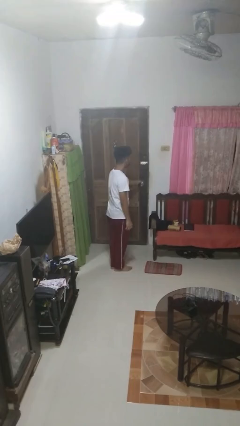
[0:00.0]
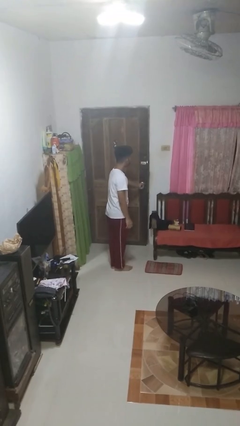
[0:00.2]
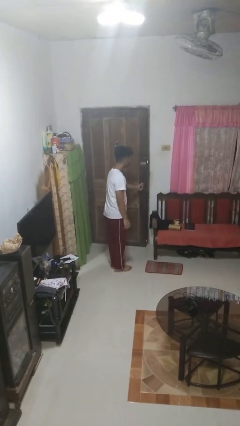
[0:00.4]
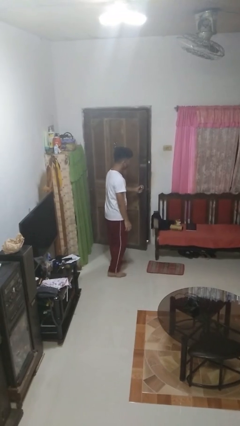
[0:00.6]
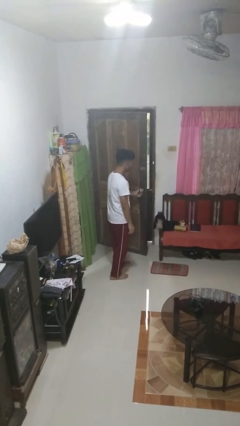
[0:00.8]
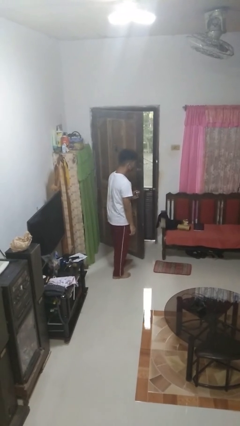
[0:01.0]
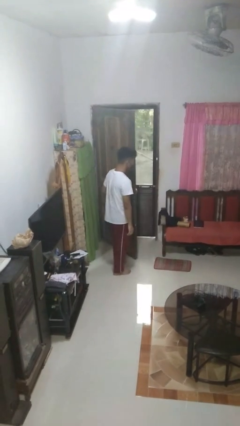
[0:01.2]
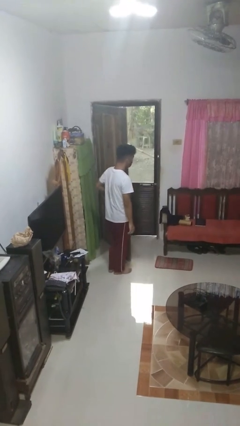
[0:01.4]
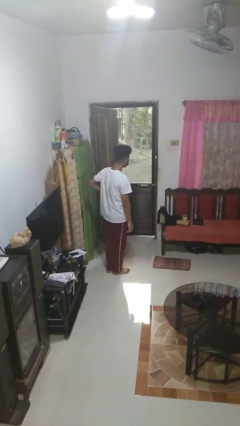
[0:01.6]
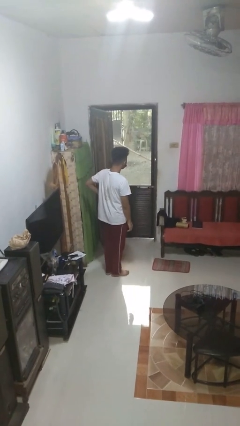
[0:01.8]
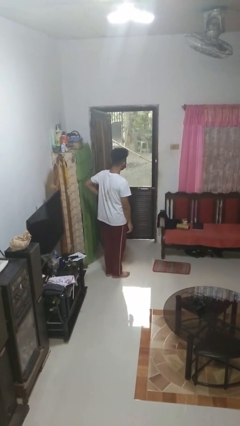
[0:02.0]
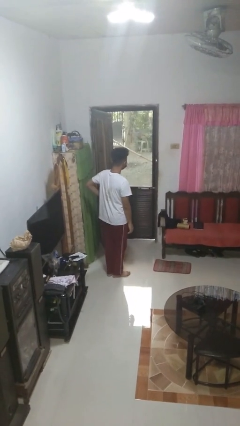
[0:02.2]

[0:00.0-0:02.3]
person opens facility door

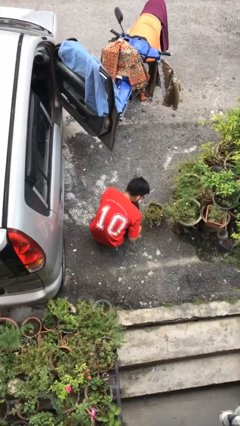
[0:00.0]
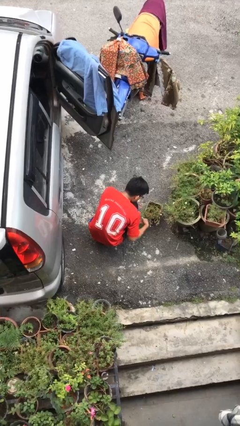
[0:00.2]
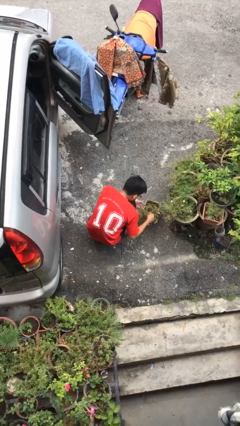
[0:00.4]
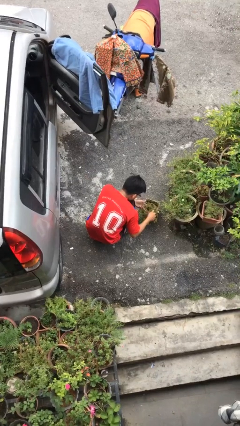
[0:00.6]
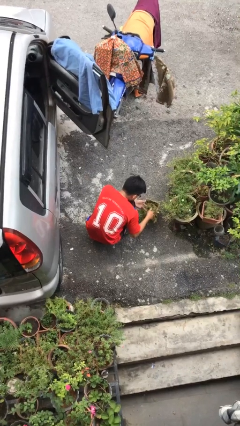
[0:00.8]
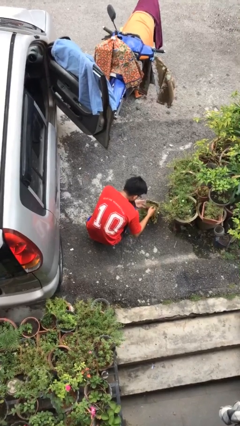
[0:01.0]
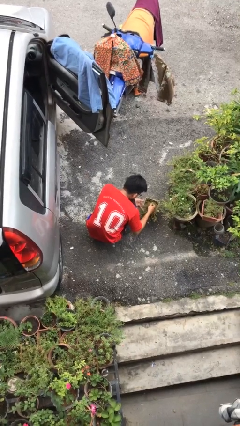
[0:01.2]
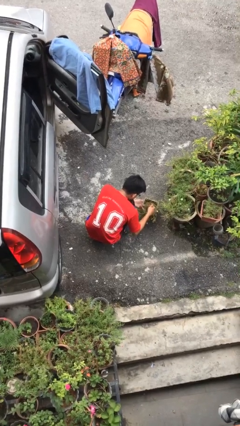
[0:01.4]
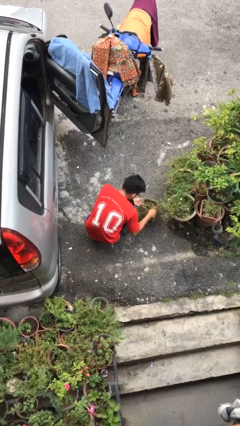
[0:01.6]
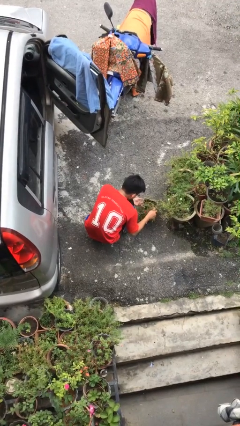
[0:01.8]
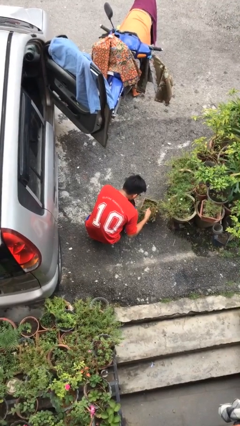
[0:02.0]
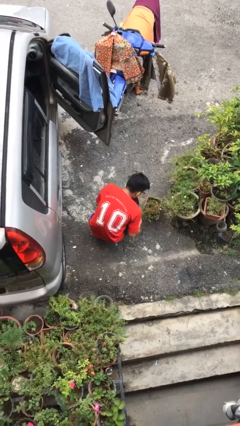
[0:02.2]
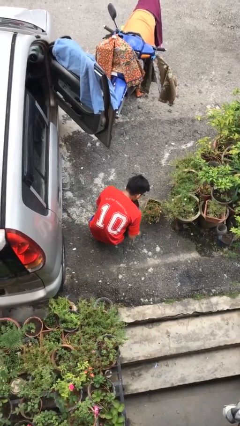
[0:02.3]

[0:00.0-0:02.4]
person arranges flowers in vase

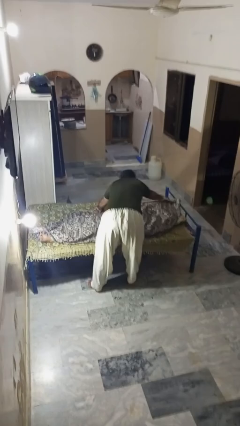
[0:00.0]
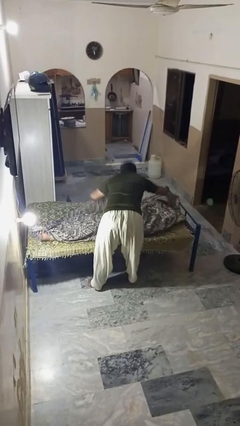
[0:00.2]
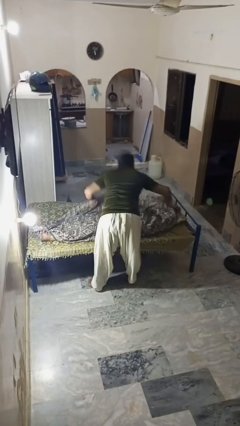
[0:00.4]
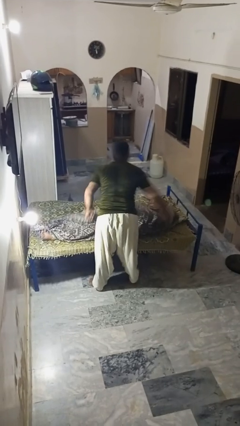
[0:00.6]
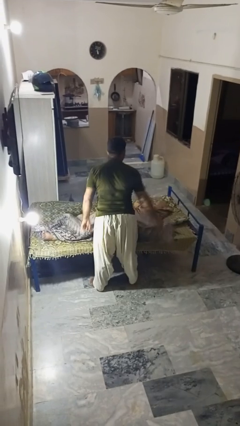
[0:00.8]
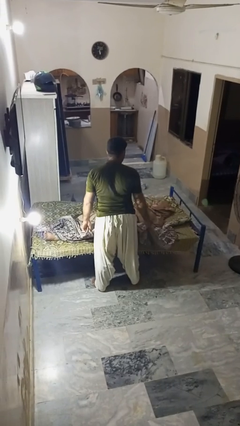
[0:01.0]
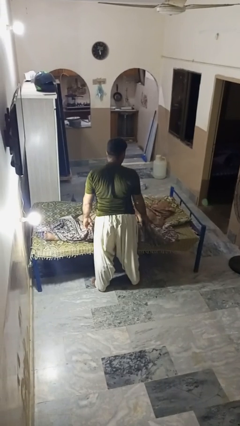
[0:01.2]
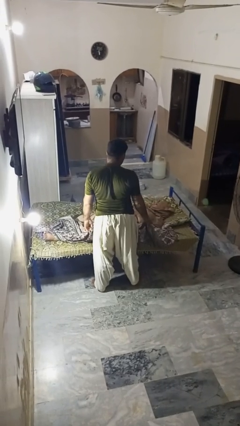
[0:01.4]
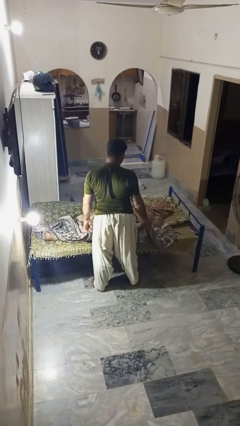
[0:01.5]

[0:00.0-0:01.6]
person uncovers friend with blanket

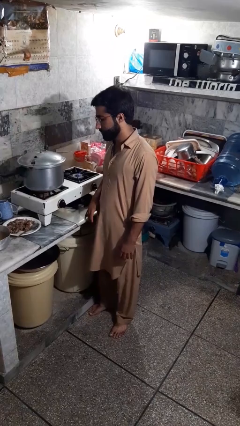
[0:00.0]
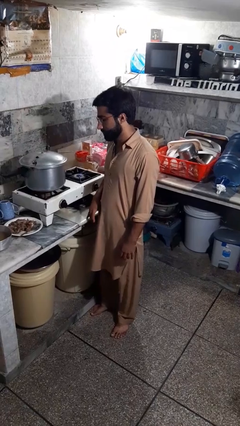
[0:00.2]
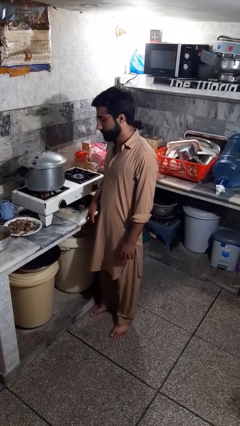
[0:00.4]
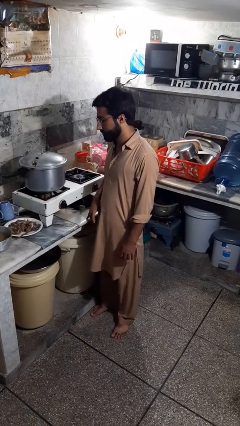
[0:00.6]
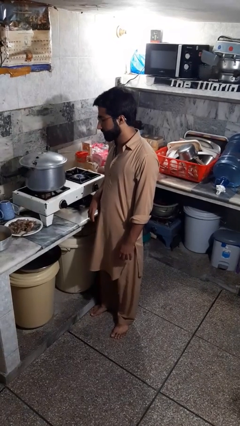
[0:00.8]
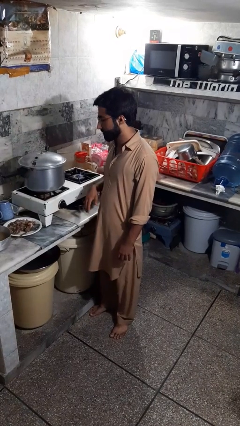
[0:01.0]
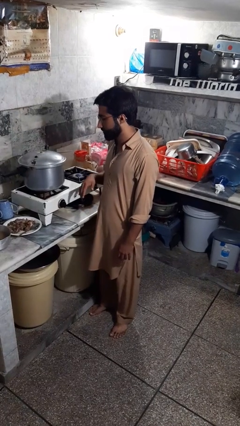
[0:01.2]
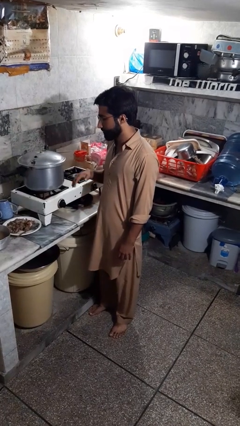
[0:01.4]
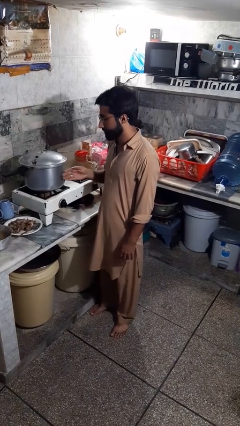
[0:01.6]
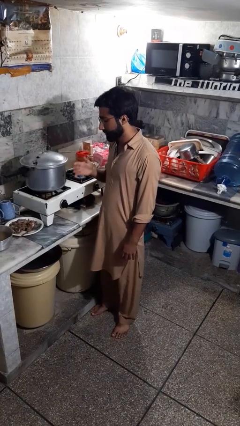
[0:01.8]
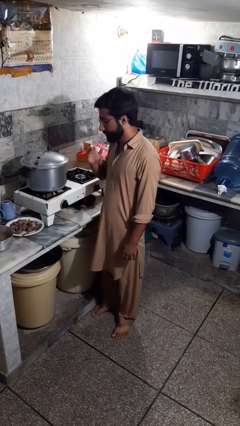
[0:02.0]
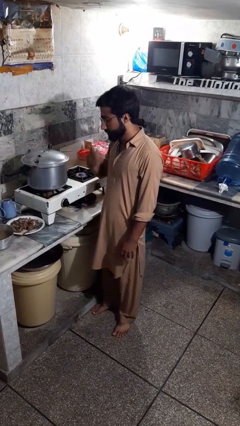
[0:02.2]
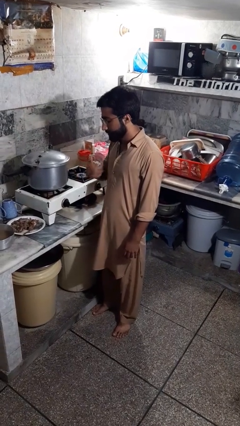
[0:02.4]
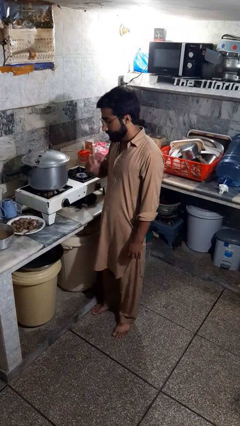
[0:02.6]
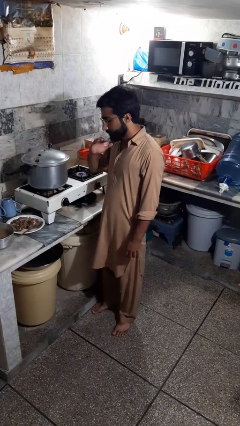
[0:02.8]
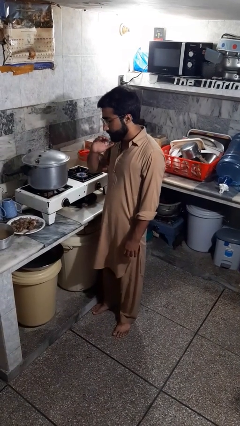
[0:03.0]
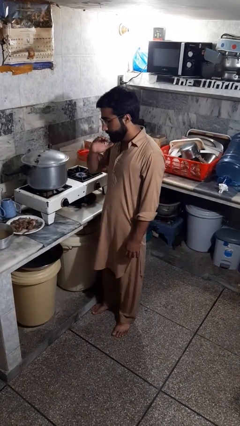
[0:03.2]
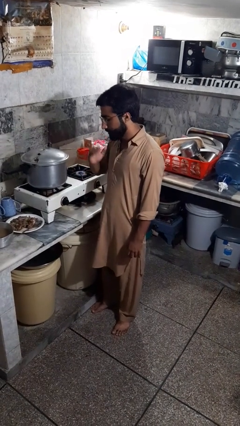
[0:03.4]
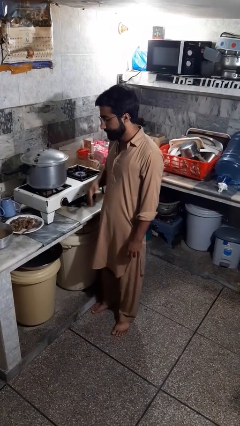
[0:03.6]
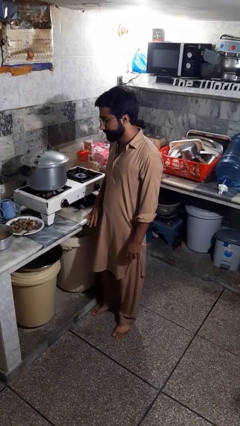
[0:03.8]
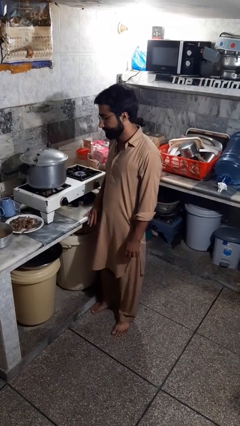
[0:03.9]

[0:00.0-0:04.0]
person burns hand

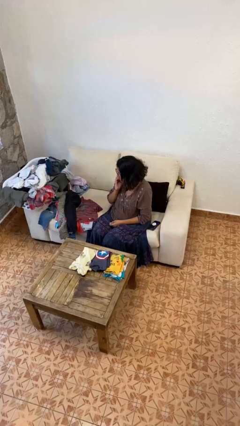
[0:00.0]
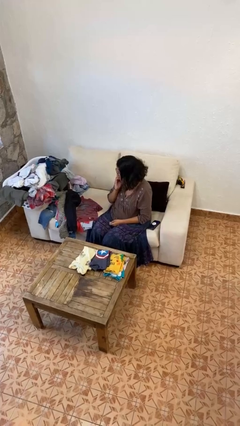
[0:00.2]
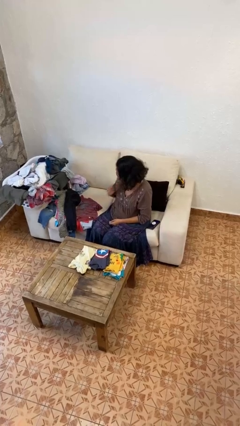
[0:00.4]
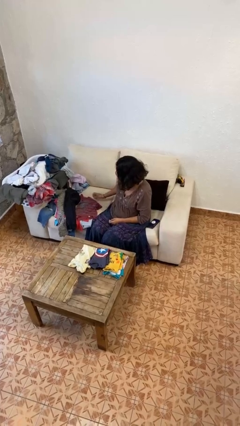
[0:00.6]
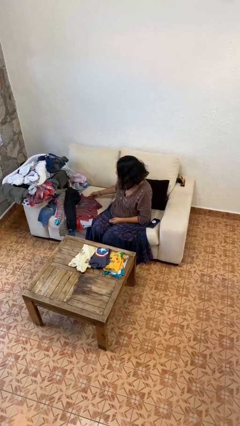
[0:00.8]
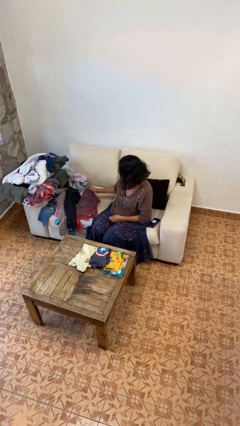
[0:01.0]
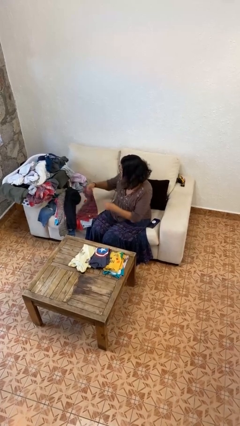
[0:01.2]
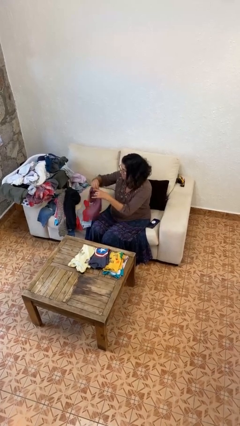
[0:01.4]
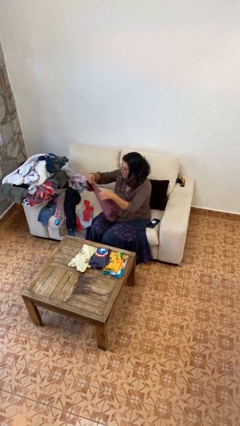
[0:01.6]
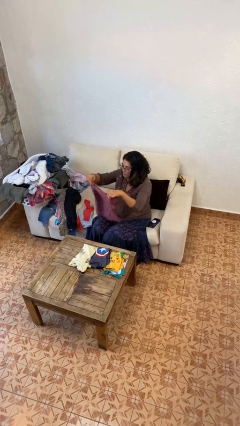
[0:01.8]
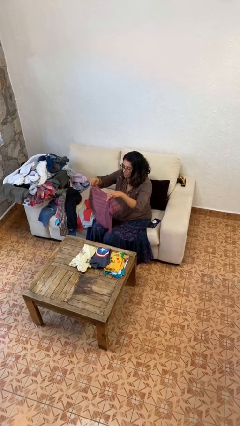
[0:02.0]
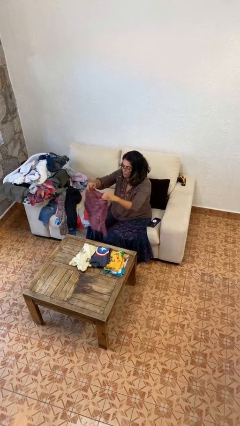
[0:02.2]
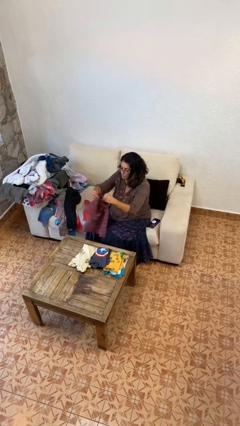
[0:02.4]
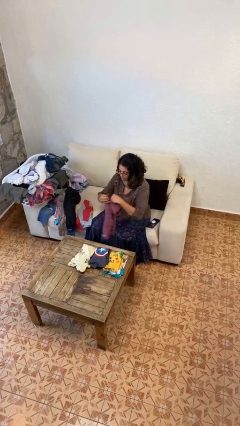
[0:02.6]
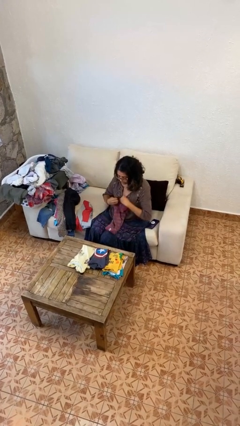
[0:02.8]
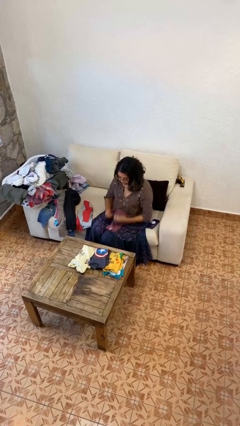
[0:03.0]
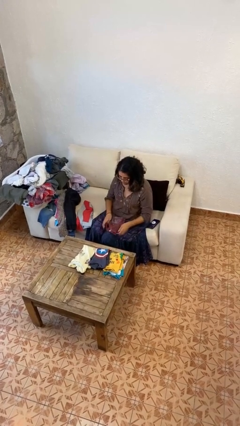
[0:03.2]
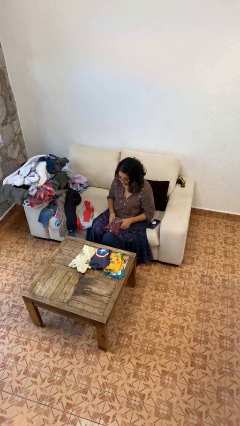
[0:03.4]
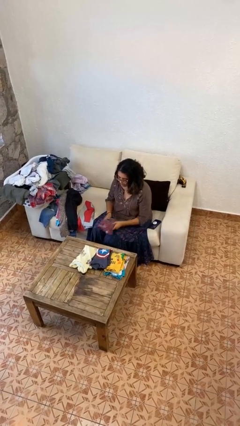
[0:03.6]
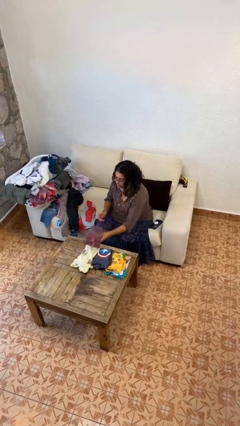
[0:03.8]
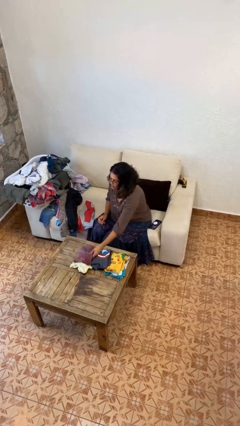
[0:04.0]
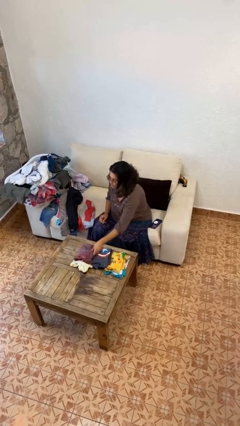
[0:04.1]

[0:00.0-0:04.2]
person folds shirt

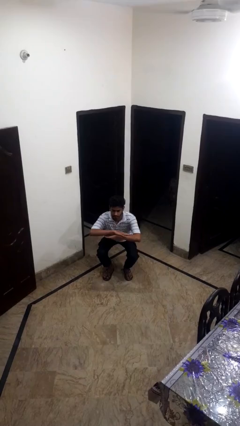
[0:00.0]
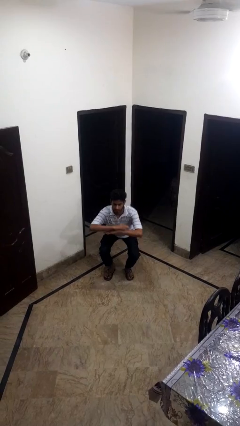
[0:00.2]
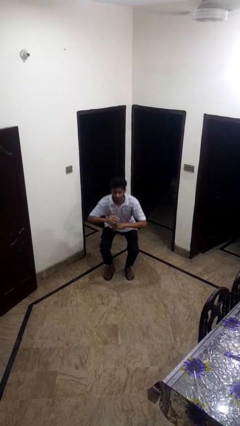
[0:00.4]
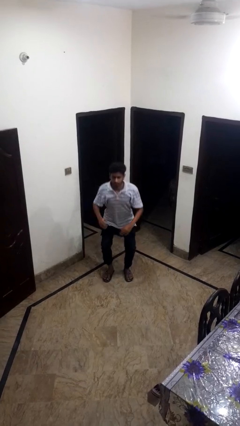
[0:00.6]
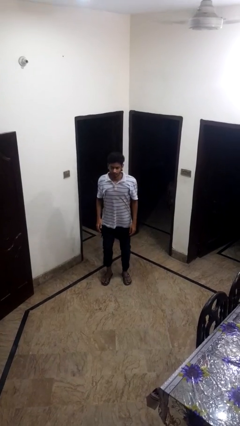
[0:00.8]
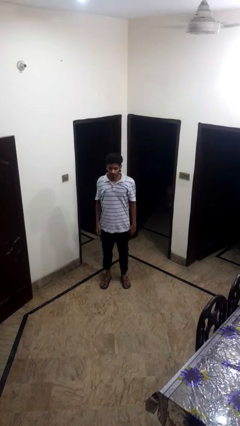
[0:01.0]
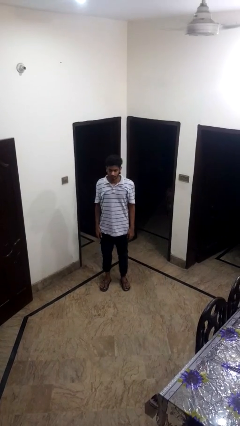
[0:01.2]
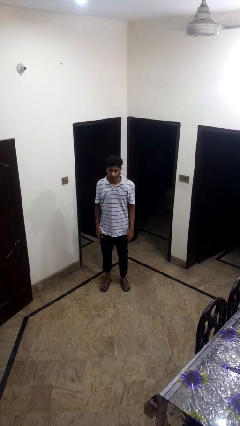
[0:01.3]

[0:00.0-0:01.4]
person stands up

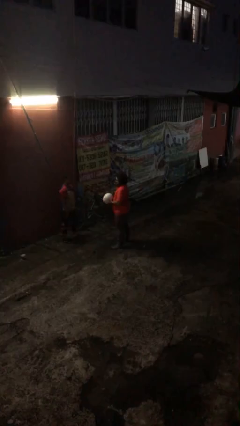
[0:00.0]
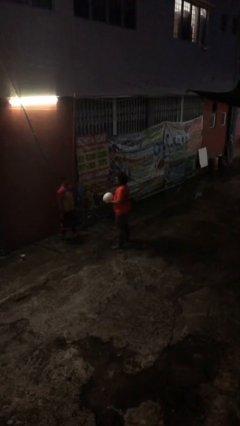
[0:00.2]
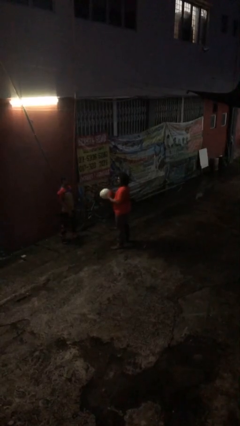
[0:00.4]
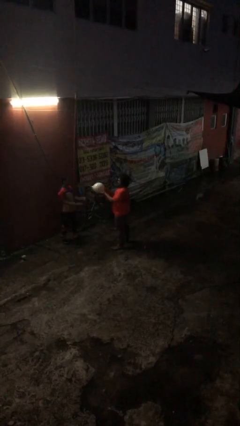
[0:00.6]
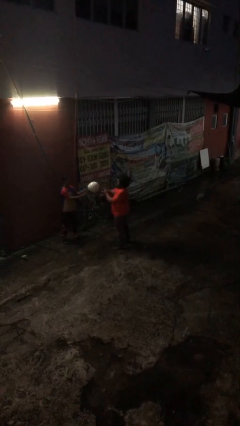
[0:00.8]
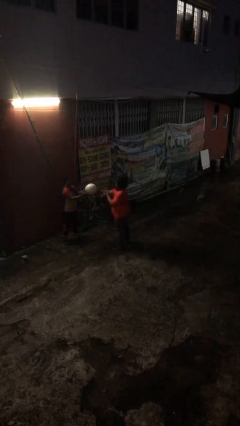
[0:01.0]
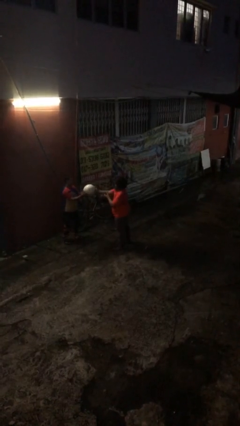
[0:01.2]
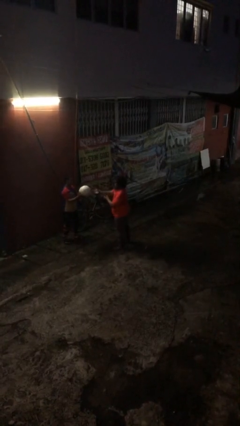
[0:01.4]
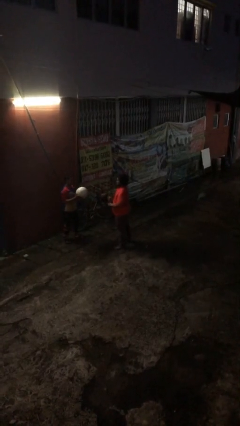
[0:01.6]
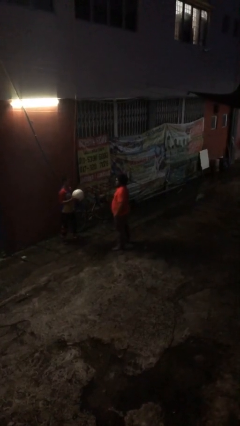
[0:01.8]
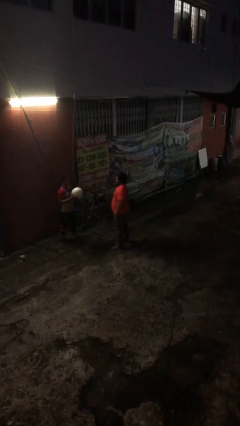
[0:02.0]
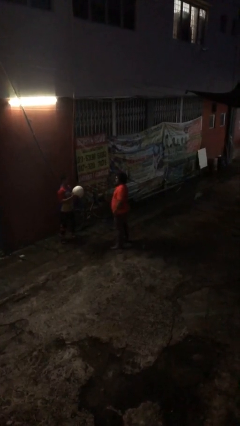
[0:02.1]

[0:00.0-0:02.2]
person transfers object to person
